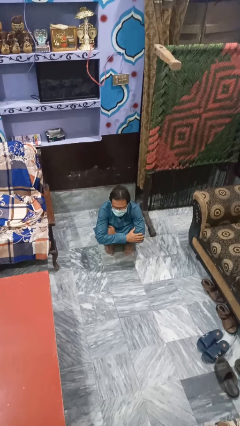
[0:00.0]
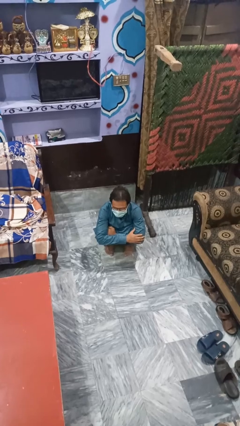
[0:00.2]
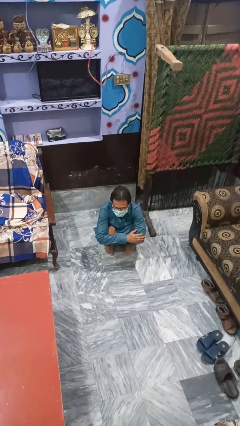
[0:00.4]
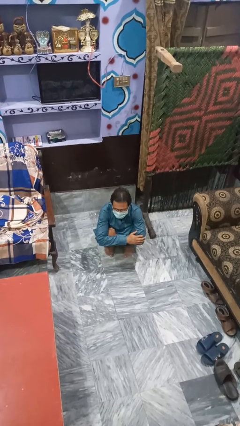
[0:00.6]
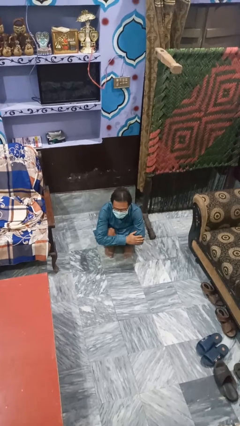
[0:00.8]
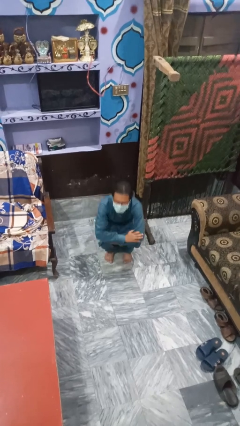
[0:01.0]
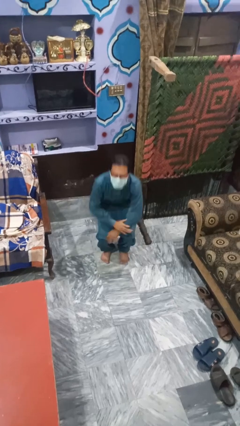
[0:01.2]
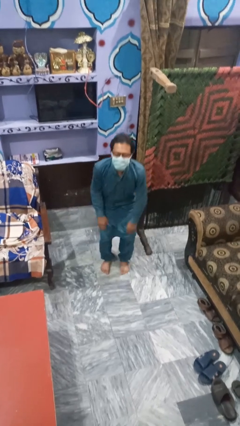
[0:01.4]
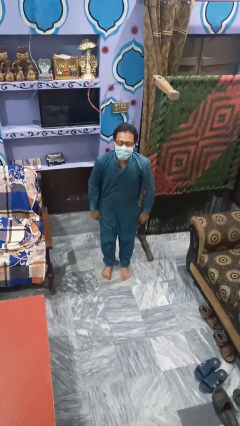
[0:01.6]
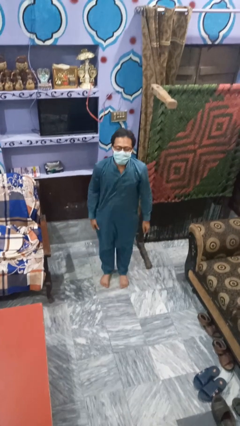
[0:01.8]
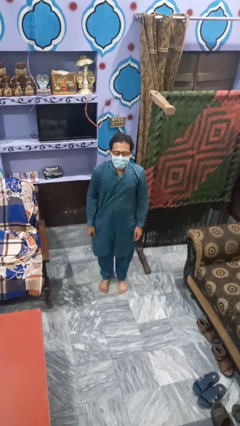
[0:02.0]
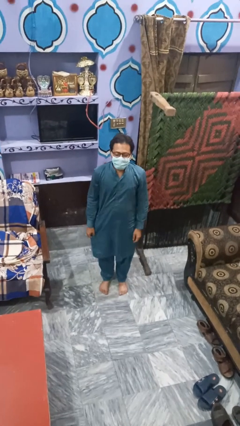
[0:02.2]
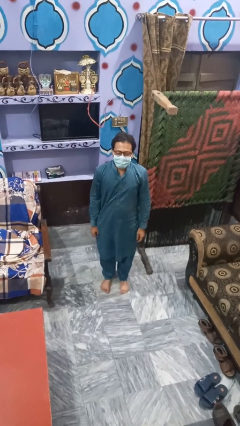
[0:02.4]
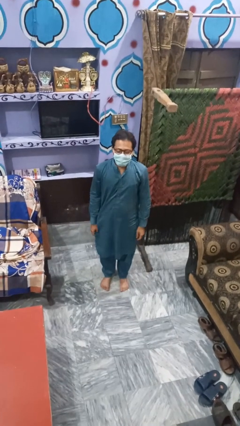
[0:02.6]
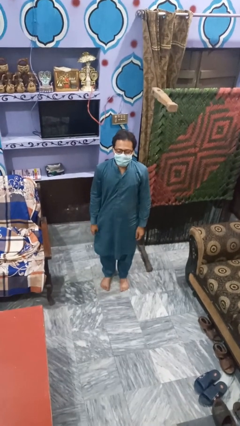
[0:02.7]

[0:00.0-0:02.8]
person stands up

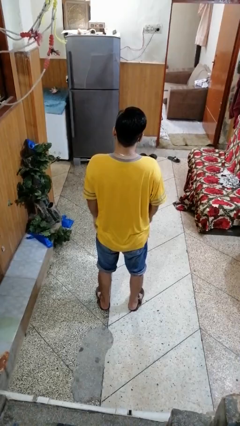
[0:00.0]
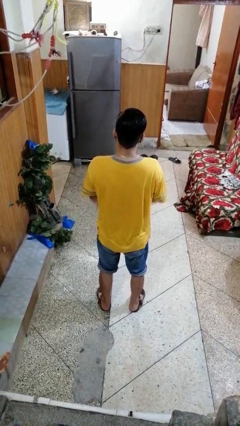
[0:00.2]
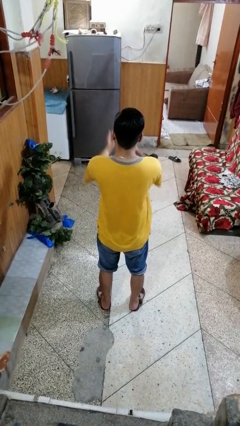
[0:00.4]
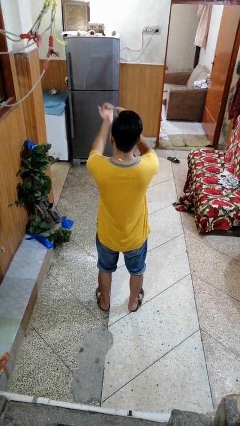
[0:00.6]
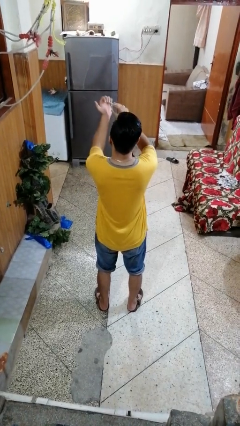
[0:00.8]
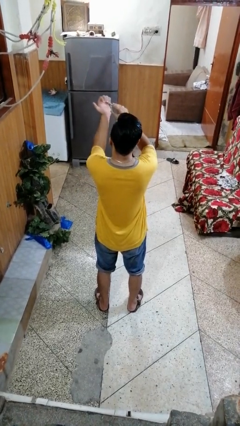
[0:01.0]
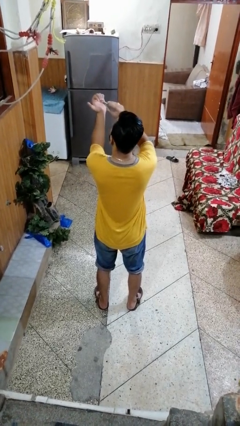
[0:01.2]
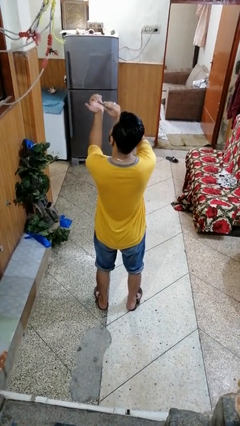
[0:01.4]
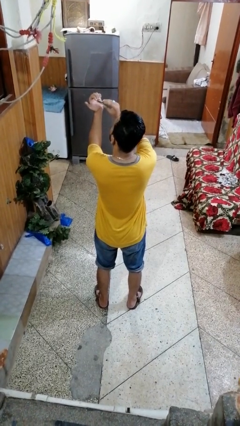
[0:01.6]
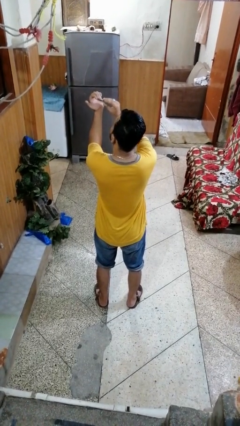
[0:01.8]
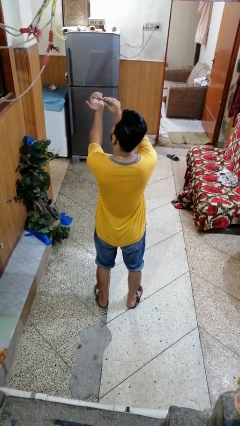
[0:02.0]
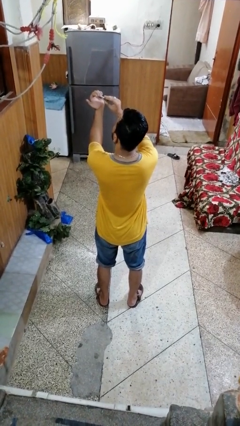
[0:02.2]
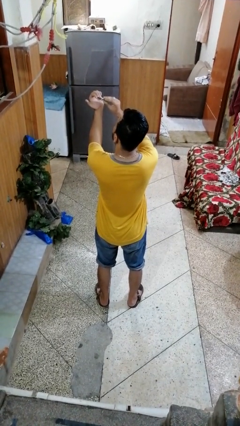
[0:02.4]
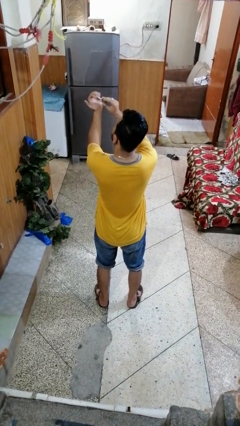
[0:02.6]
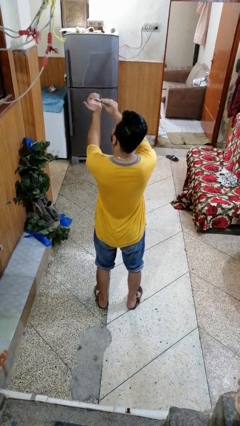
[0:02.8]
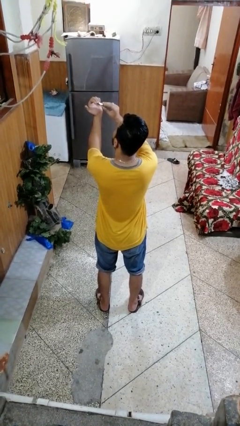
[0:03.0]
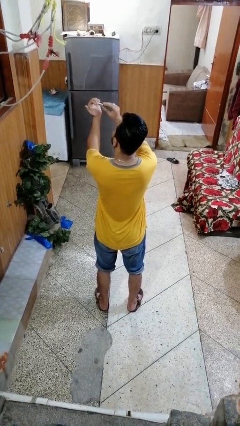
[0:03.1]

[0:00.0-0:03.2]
person clips fingernails

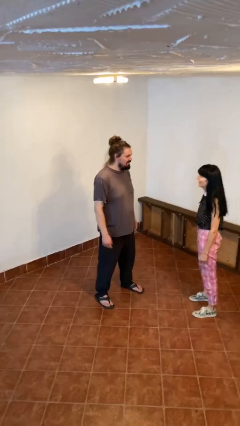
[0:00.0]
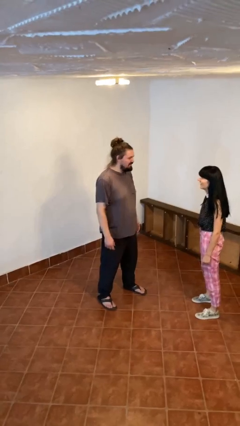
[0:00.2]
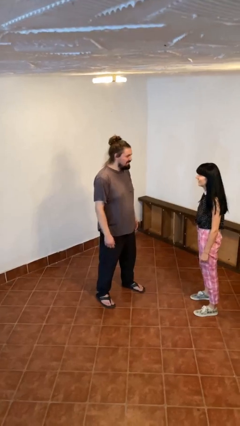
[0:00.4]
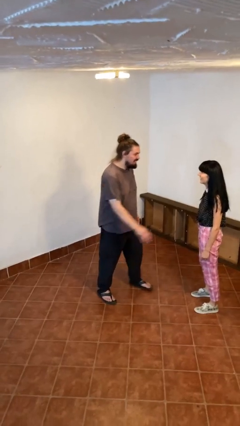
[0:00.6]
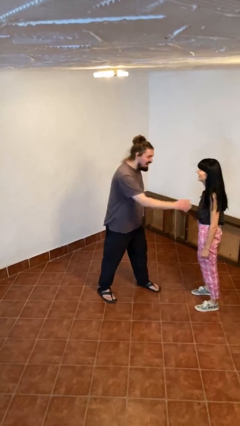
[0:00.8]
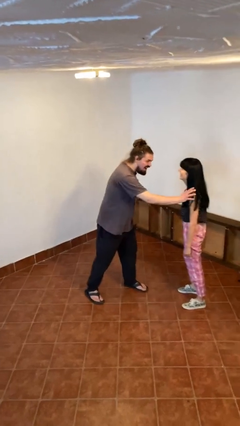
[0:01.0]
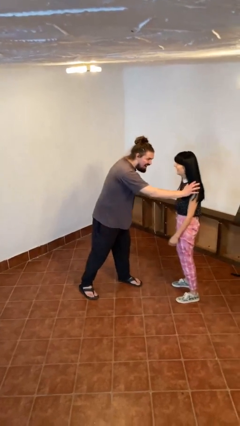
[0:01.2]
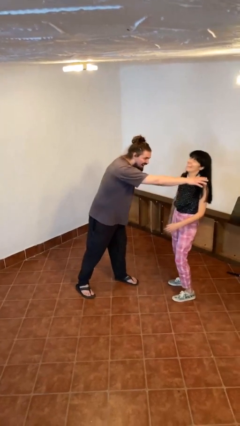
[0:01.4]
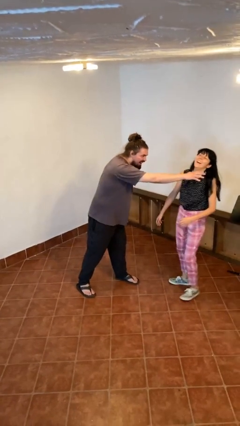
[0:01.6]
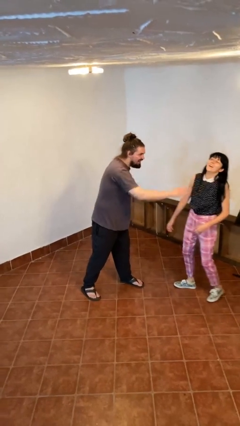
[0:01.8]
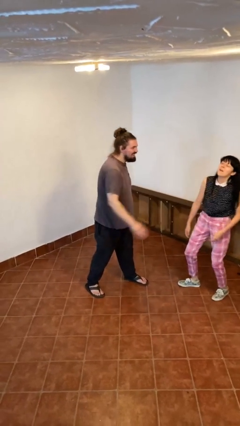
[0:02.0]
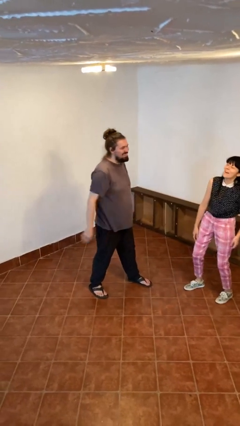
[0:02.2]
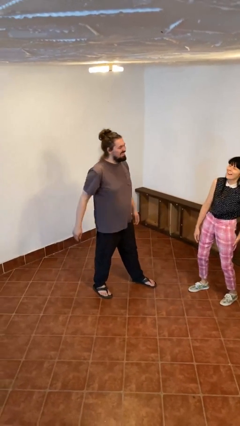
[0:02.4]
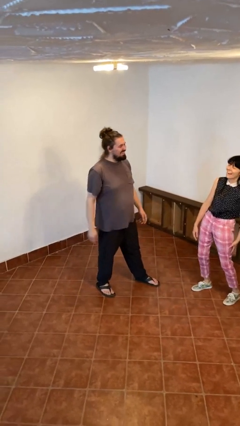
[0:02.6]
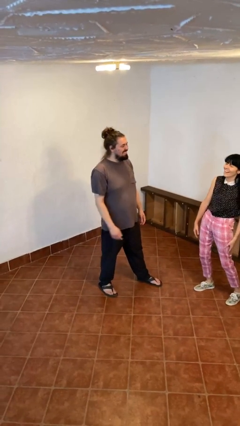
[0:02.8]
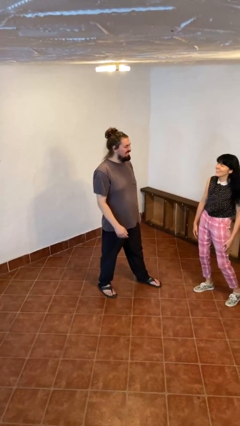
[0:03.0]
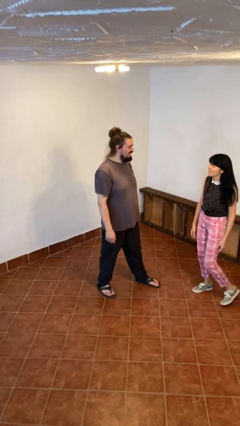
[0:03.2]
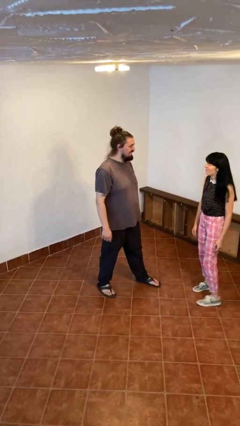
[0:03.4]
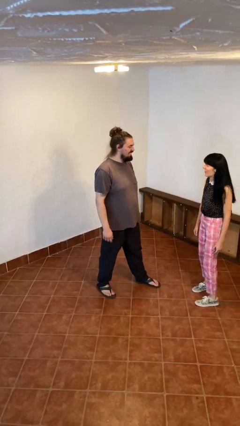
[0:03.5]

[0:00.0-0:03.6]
person shoves person

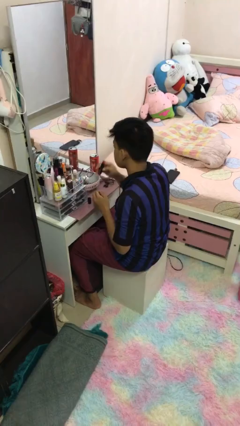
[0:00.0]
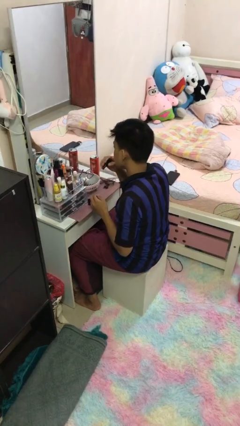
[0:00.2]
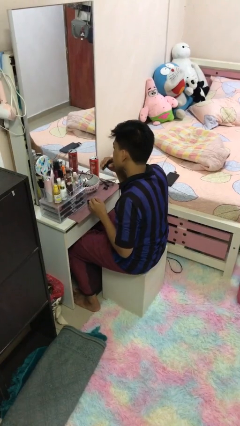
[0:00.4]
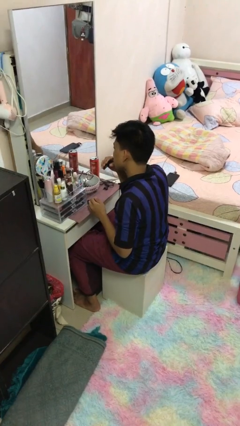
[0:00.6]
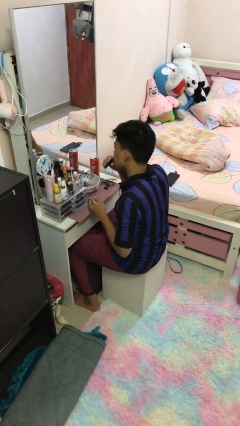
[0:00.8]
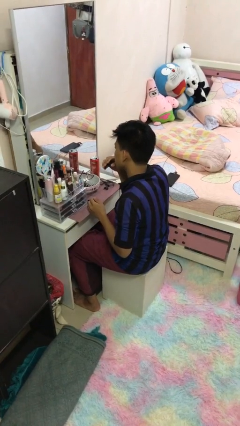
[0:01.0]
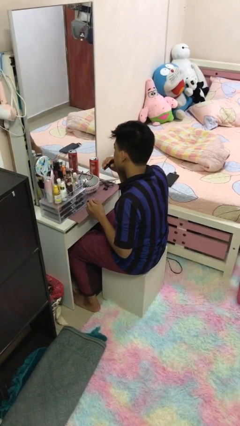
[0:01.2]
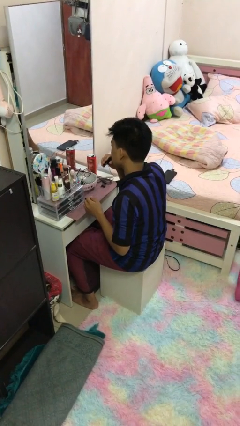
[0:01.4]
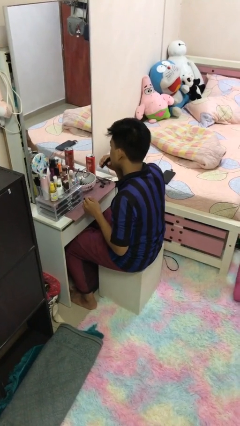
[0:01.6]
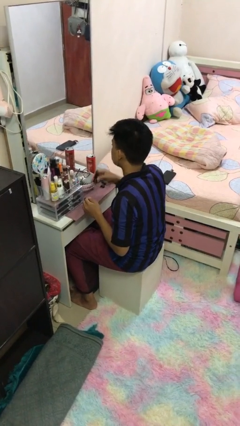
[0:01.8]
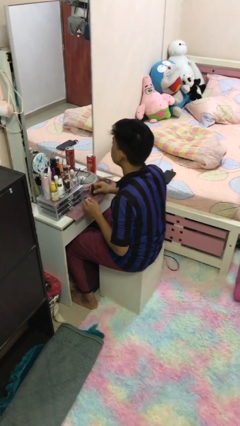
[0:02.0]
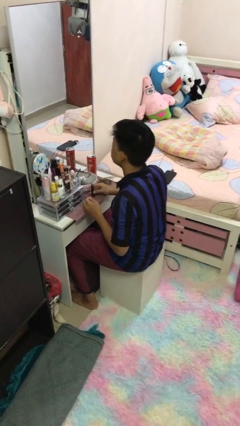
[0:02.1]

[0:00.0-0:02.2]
person applies lip makeup

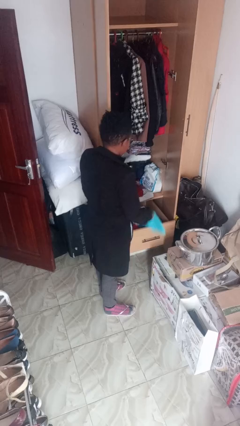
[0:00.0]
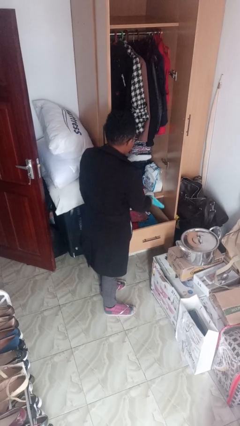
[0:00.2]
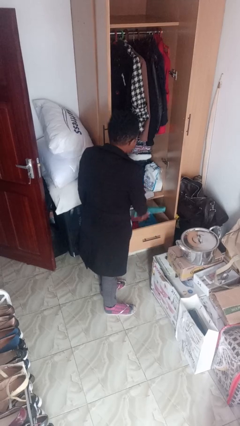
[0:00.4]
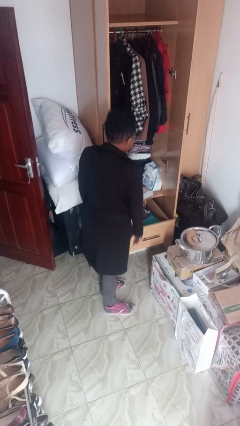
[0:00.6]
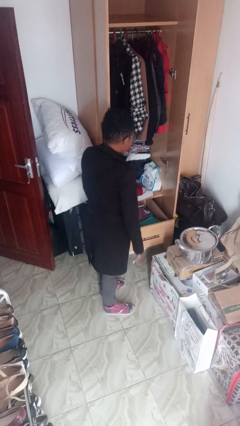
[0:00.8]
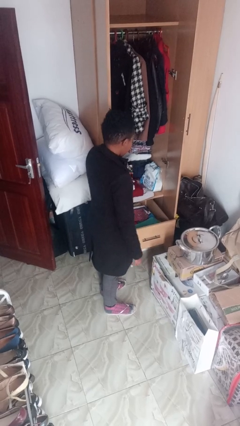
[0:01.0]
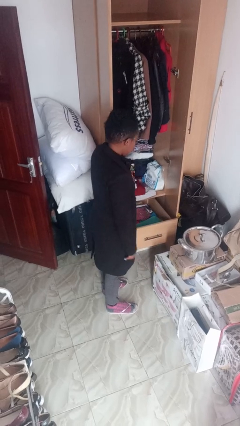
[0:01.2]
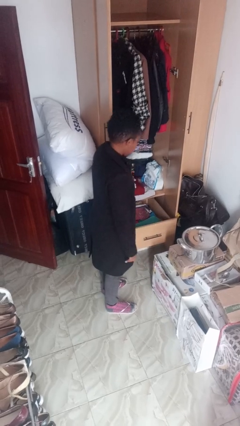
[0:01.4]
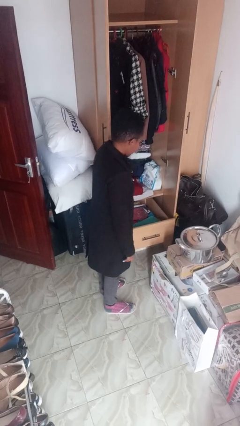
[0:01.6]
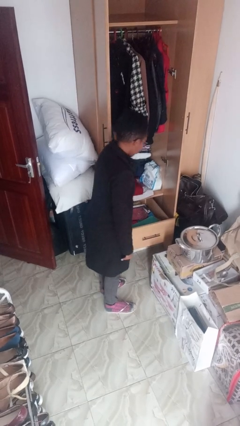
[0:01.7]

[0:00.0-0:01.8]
person puts clothes into dresser

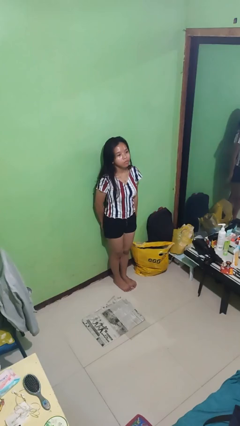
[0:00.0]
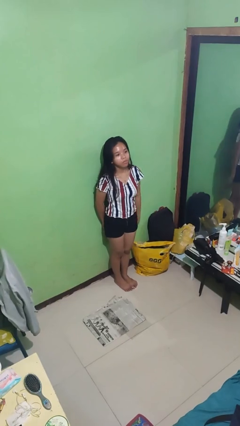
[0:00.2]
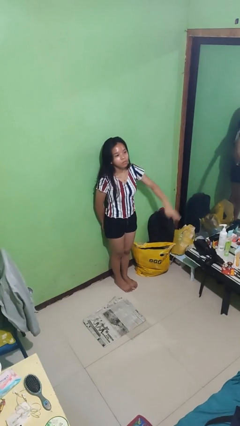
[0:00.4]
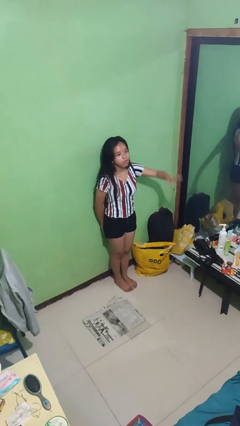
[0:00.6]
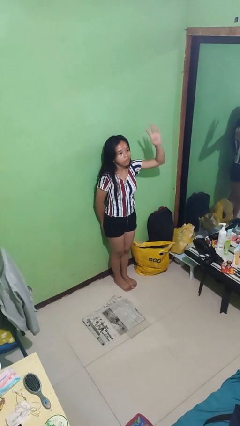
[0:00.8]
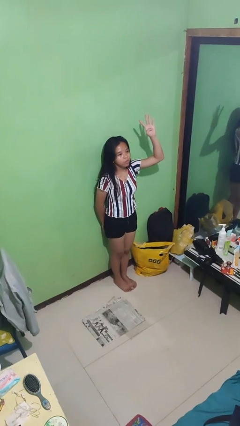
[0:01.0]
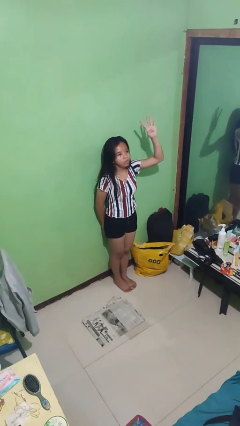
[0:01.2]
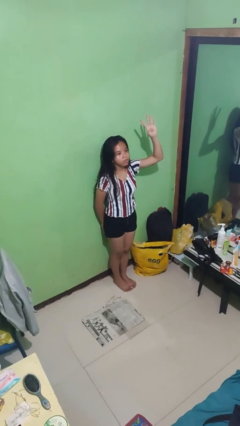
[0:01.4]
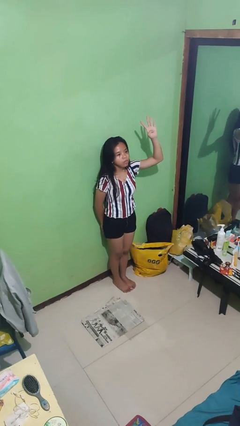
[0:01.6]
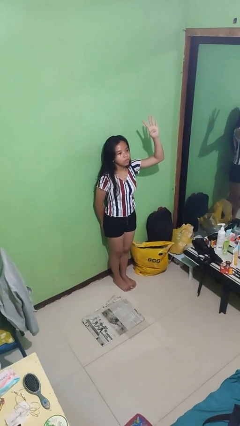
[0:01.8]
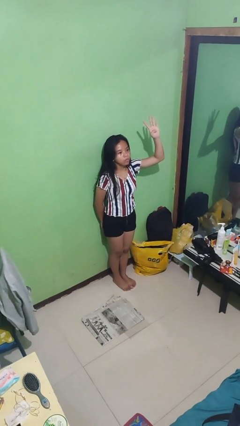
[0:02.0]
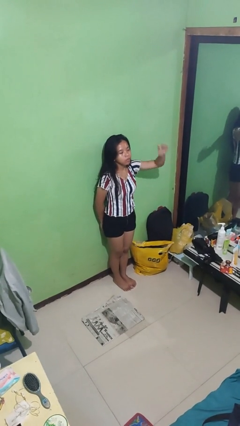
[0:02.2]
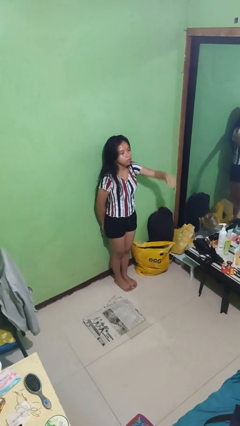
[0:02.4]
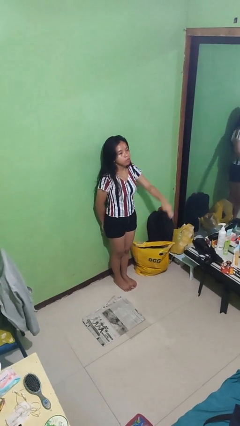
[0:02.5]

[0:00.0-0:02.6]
person gestures number four

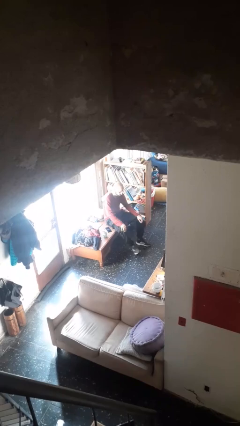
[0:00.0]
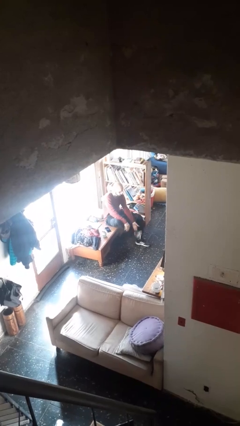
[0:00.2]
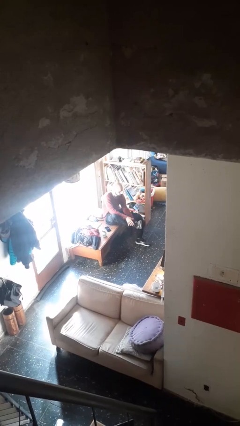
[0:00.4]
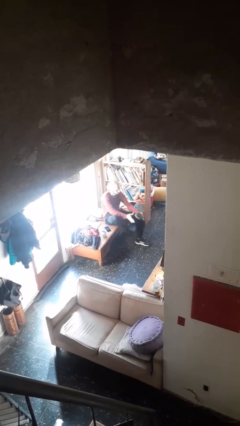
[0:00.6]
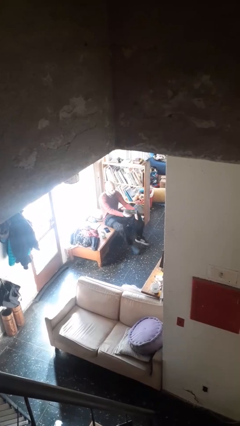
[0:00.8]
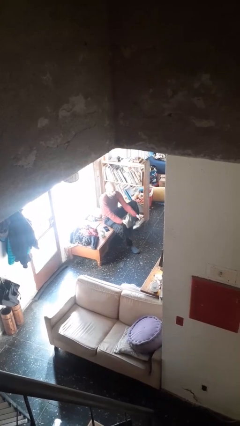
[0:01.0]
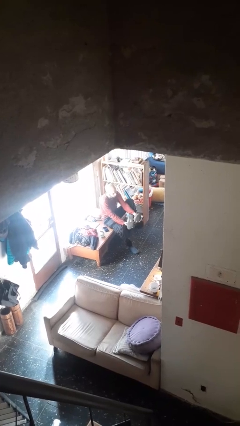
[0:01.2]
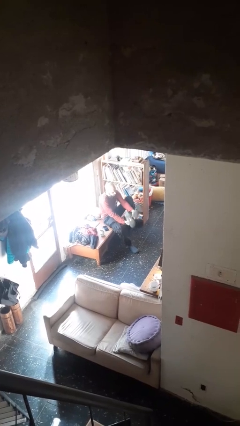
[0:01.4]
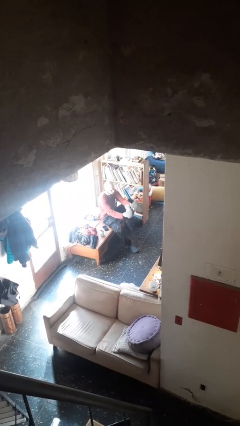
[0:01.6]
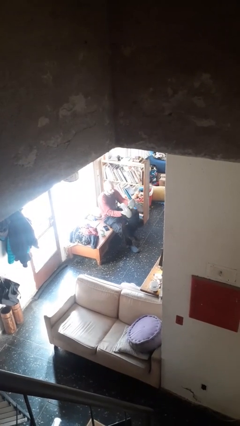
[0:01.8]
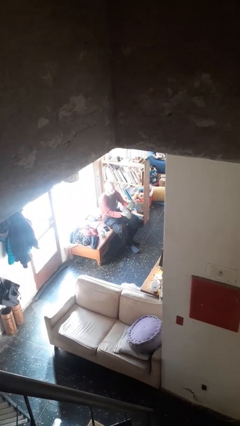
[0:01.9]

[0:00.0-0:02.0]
person takes off shoes
